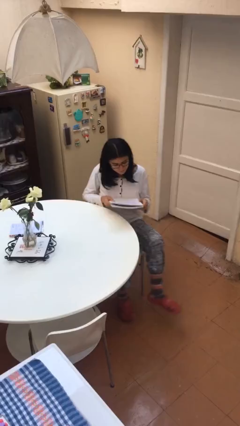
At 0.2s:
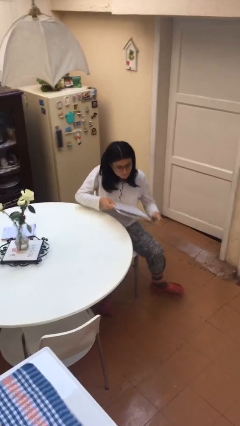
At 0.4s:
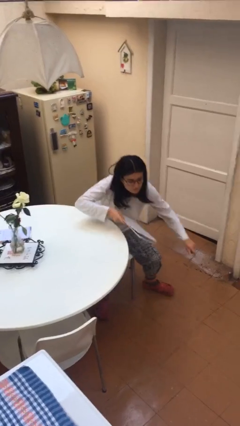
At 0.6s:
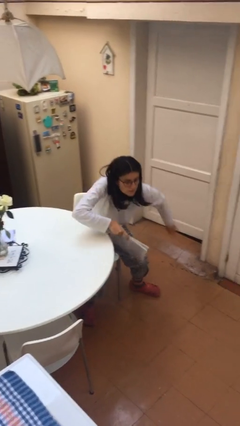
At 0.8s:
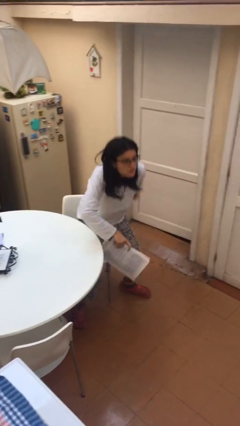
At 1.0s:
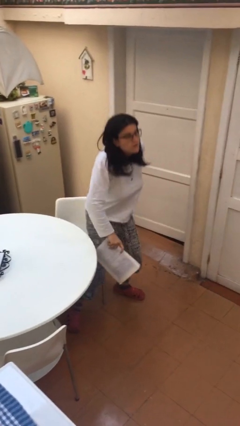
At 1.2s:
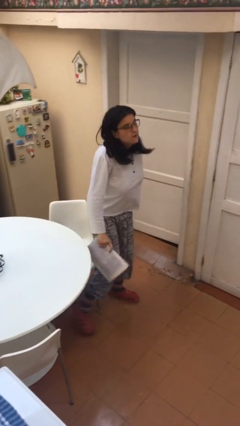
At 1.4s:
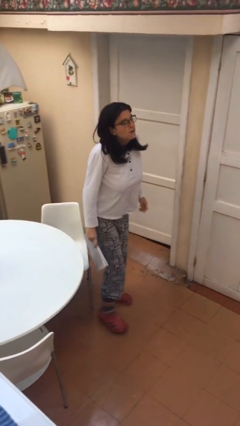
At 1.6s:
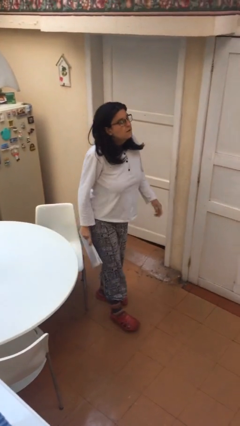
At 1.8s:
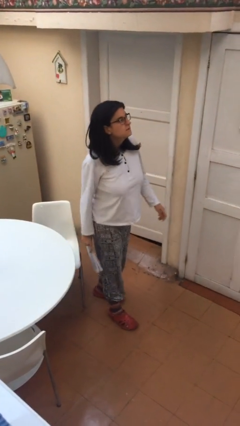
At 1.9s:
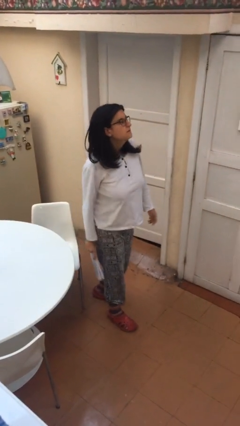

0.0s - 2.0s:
person stands up

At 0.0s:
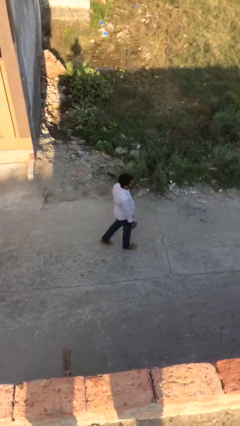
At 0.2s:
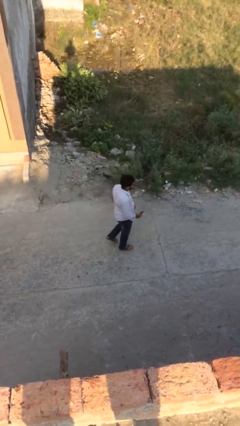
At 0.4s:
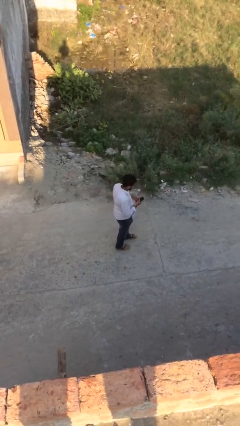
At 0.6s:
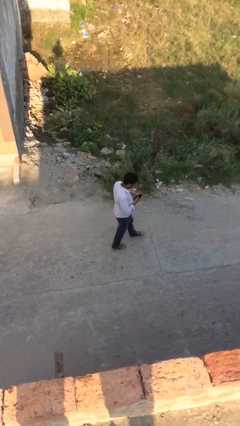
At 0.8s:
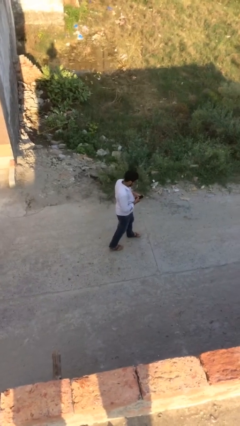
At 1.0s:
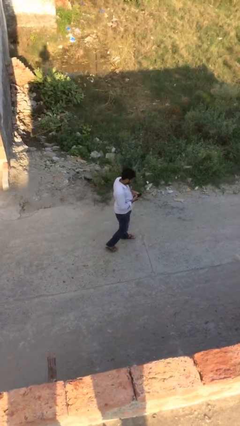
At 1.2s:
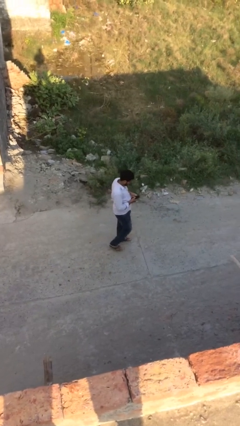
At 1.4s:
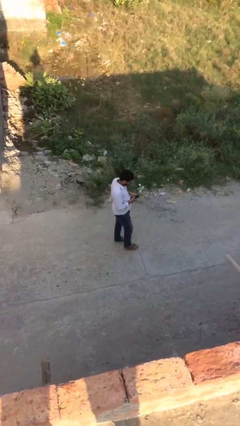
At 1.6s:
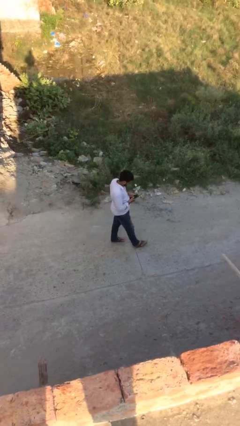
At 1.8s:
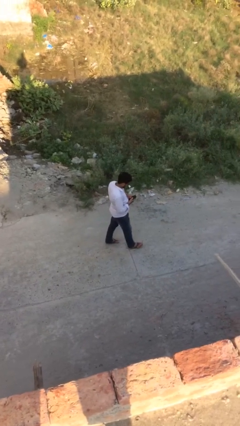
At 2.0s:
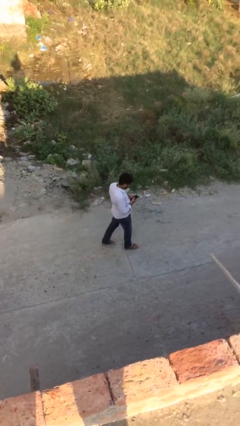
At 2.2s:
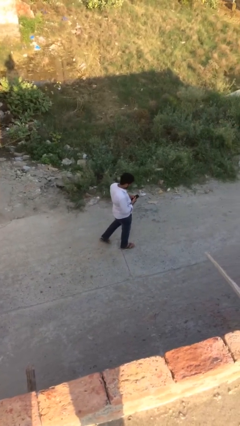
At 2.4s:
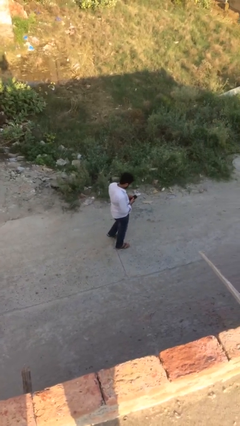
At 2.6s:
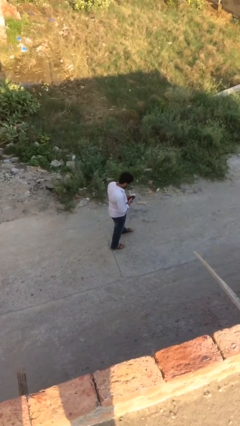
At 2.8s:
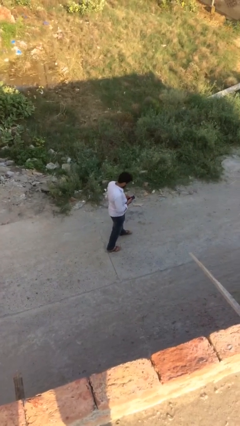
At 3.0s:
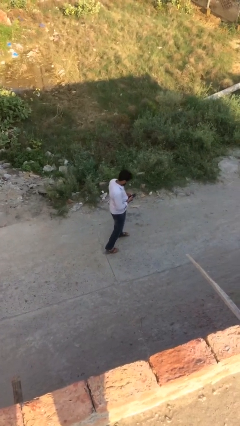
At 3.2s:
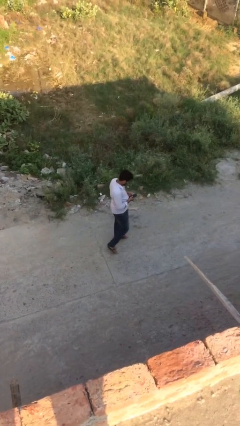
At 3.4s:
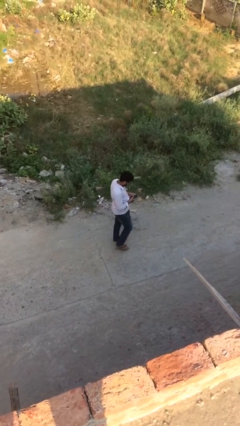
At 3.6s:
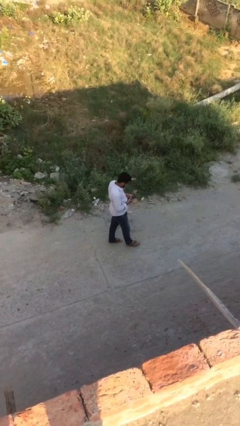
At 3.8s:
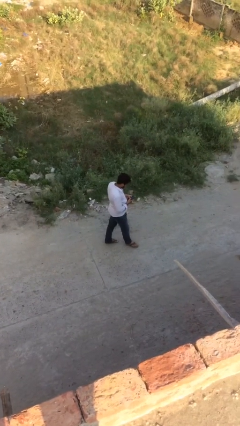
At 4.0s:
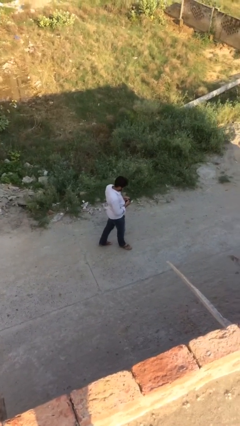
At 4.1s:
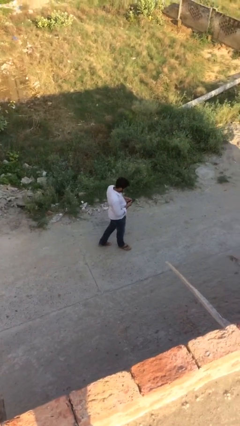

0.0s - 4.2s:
person texts on phone

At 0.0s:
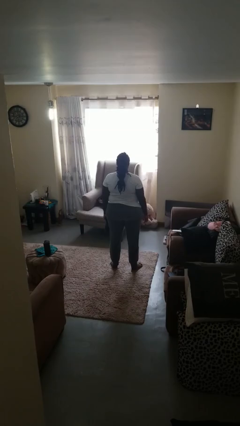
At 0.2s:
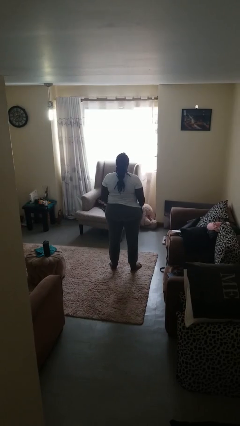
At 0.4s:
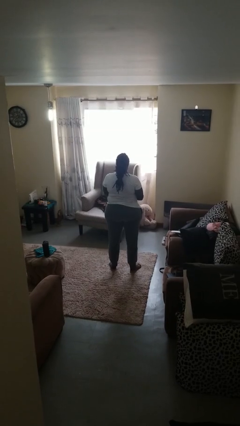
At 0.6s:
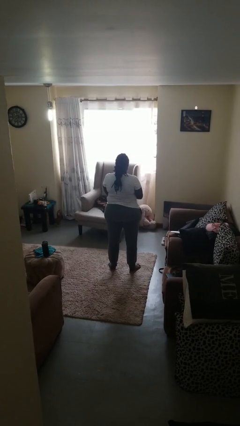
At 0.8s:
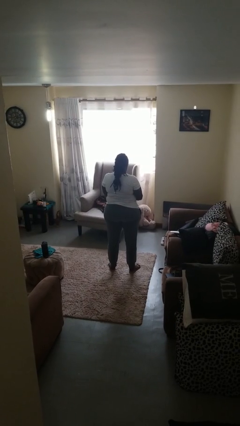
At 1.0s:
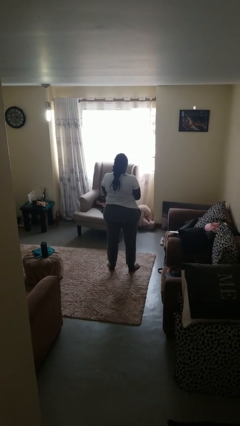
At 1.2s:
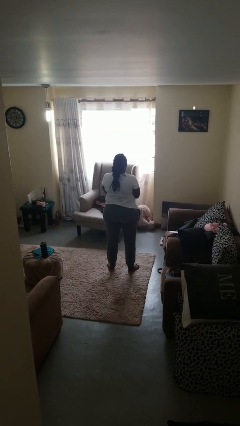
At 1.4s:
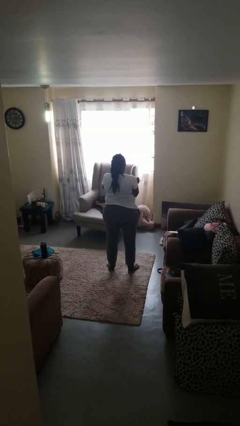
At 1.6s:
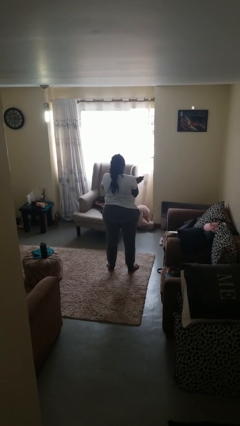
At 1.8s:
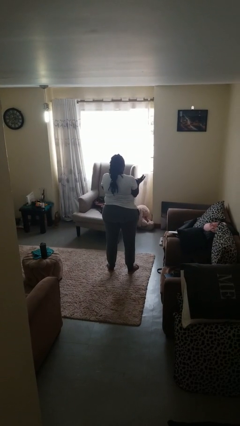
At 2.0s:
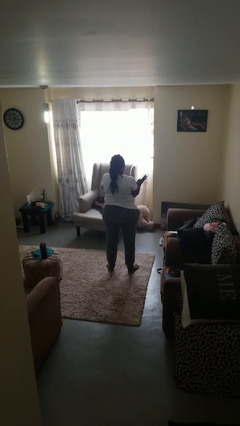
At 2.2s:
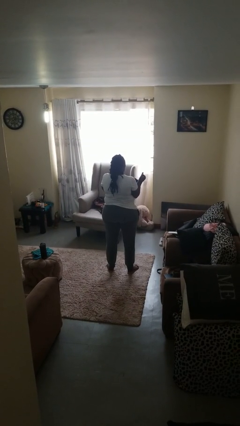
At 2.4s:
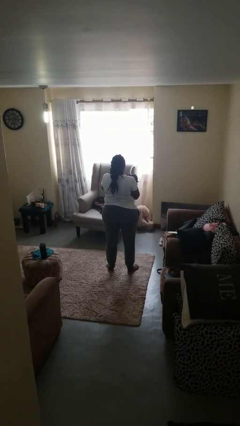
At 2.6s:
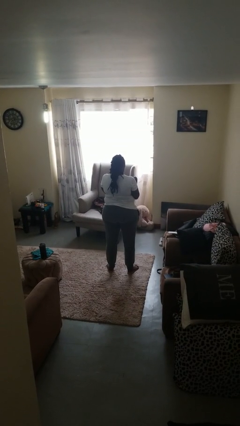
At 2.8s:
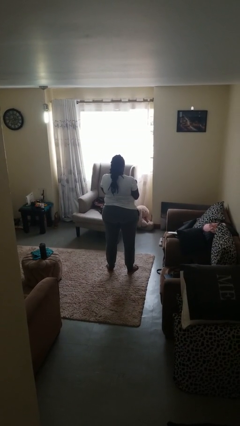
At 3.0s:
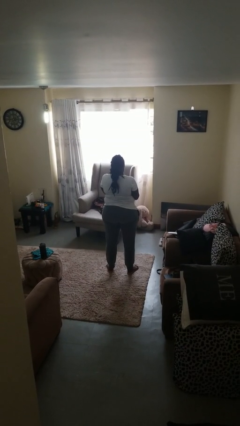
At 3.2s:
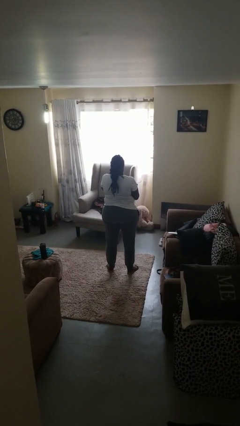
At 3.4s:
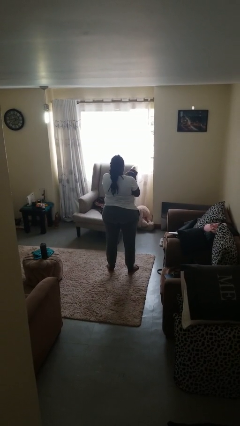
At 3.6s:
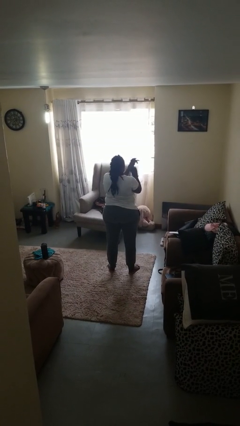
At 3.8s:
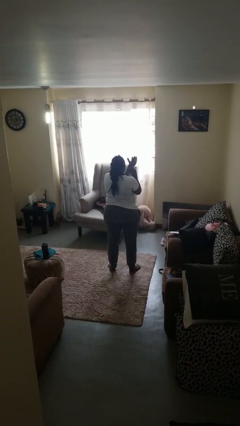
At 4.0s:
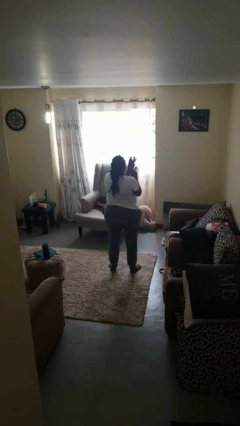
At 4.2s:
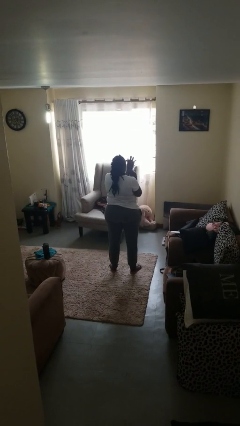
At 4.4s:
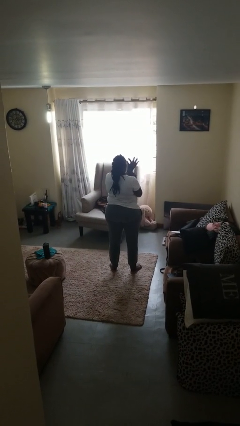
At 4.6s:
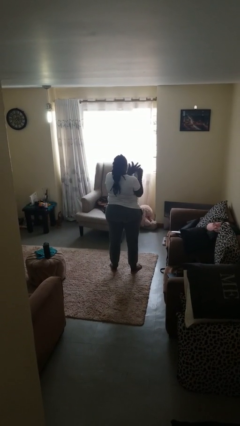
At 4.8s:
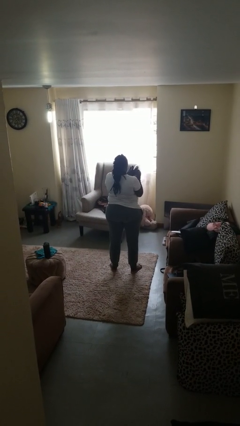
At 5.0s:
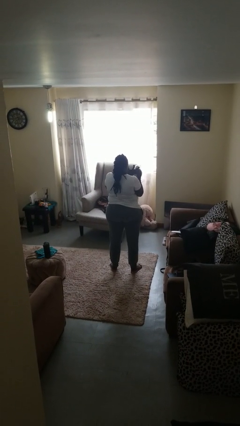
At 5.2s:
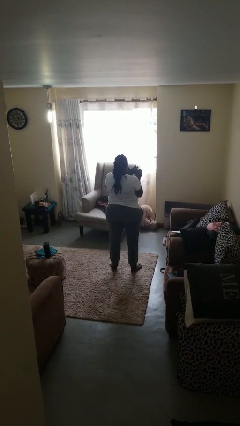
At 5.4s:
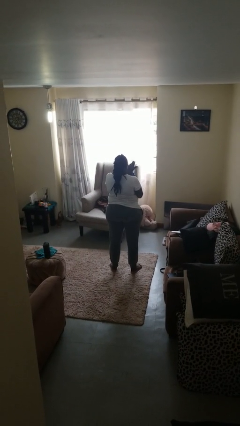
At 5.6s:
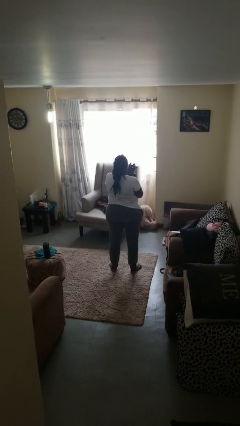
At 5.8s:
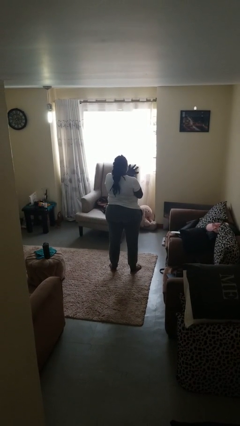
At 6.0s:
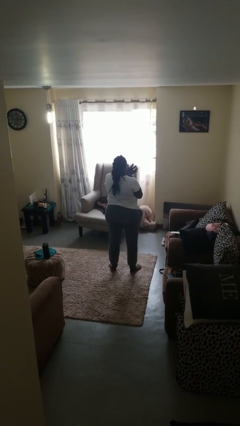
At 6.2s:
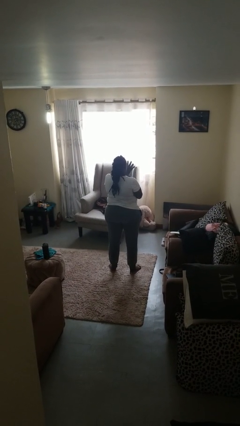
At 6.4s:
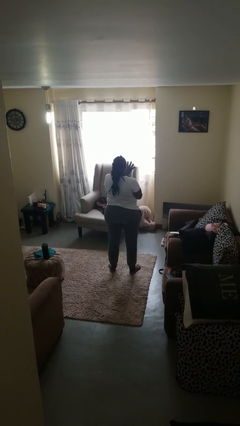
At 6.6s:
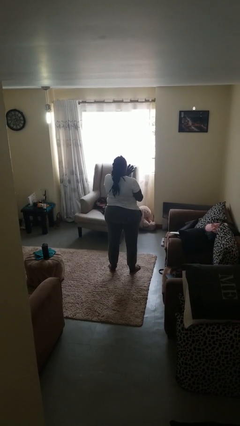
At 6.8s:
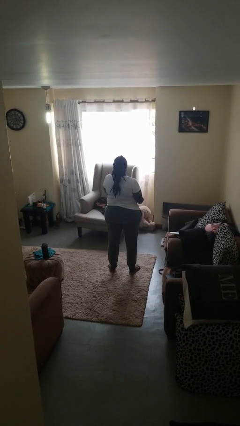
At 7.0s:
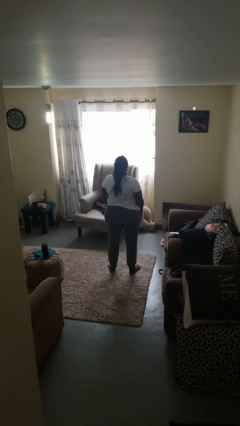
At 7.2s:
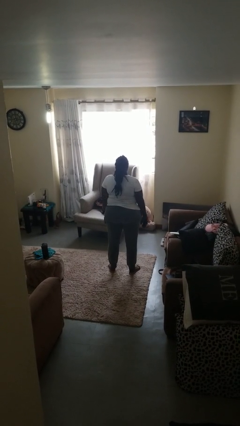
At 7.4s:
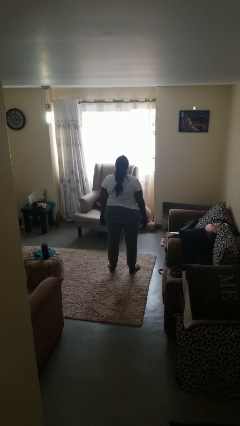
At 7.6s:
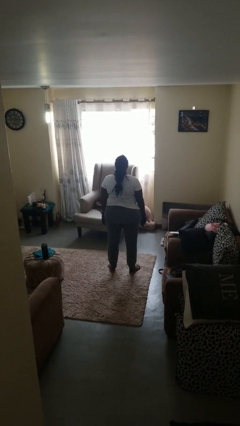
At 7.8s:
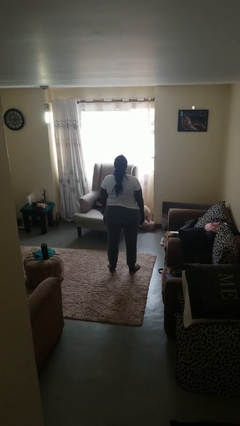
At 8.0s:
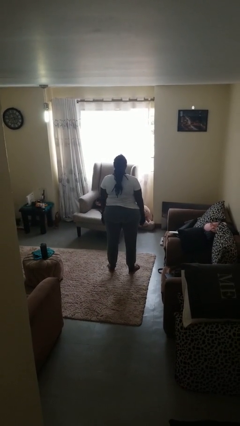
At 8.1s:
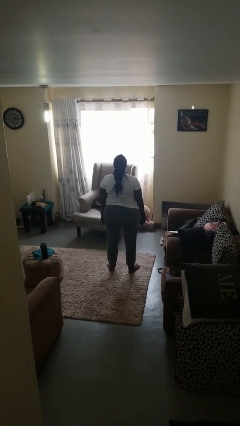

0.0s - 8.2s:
person puts on gloves

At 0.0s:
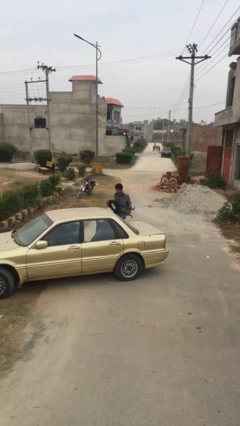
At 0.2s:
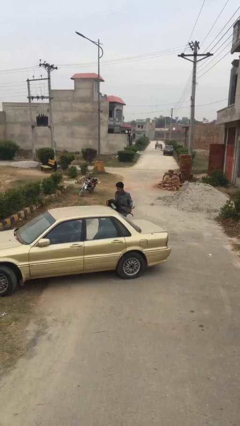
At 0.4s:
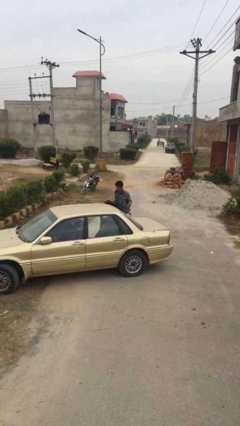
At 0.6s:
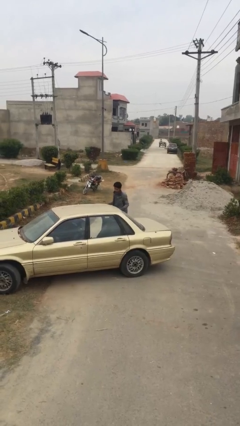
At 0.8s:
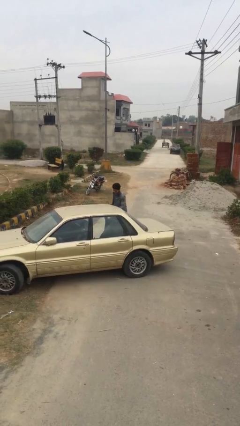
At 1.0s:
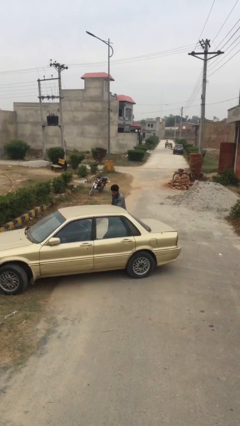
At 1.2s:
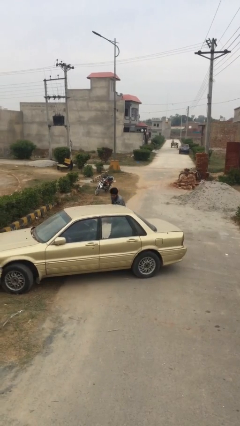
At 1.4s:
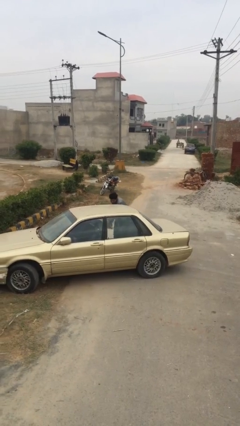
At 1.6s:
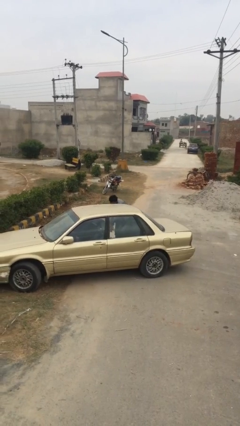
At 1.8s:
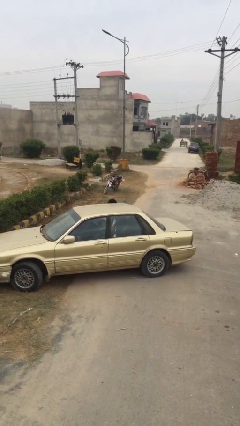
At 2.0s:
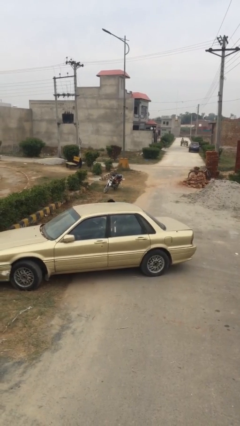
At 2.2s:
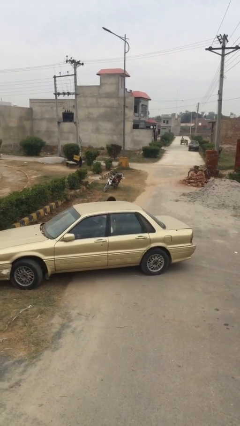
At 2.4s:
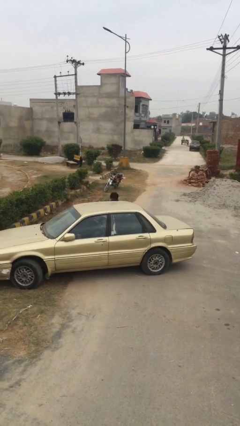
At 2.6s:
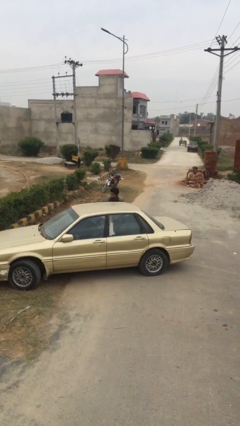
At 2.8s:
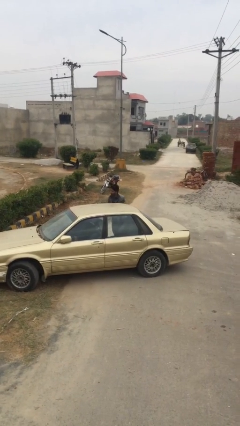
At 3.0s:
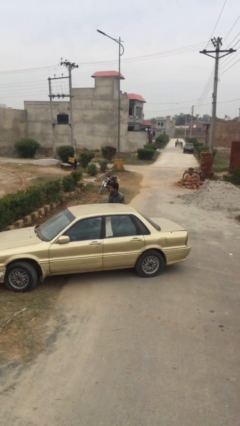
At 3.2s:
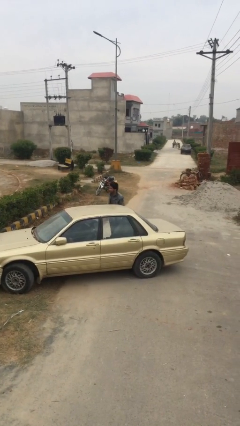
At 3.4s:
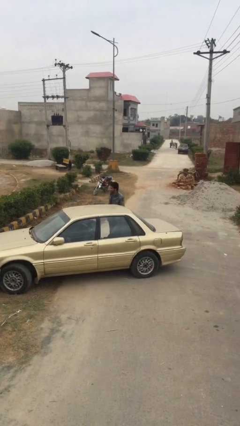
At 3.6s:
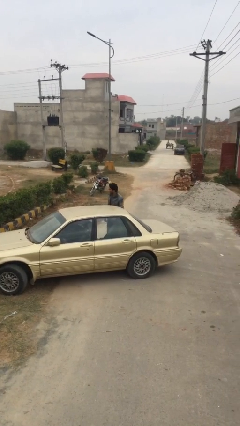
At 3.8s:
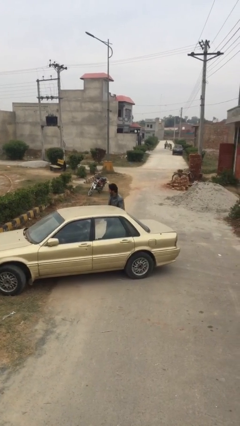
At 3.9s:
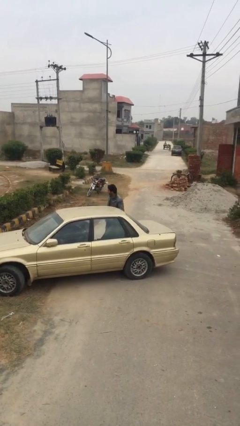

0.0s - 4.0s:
person loads car
